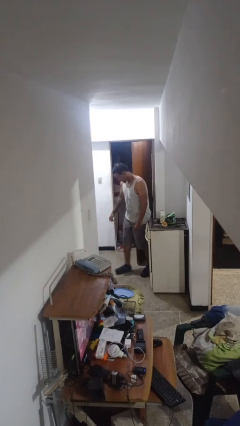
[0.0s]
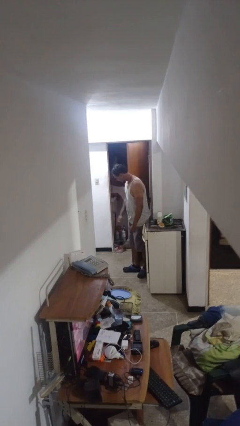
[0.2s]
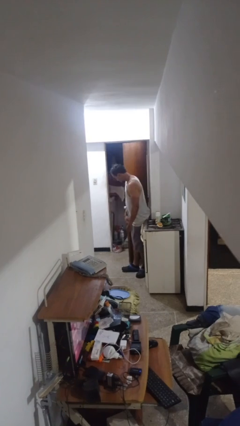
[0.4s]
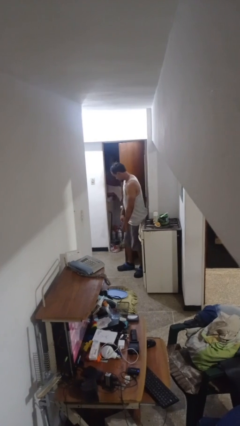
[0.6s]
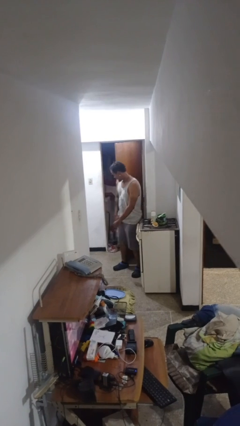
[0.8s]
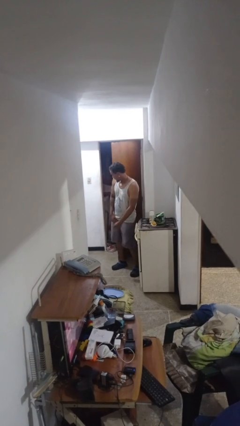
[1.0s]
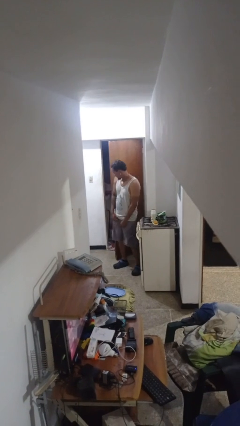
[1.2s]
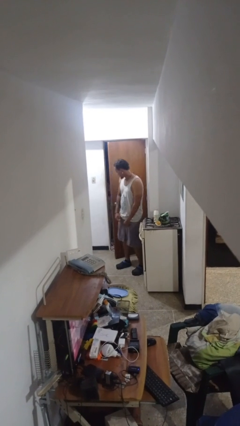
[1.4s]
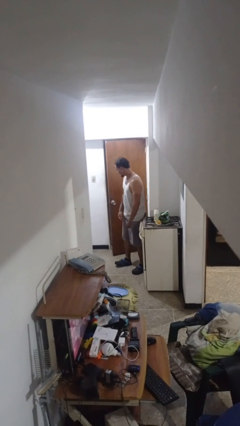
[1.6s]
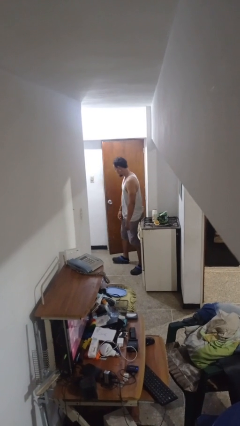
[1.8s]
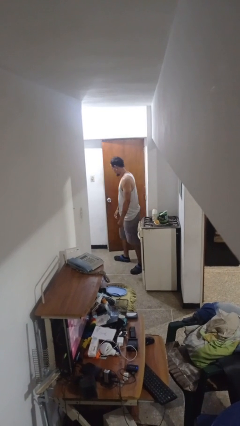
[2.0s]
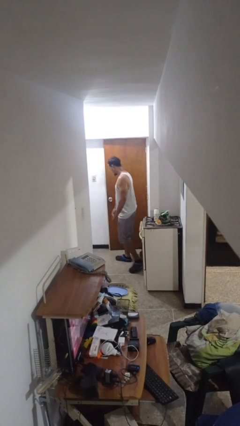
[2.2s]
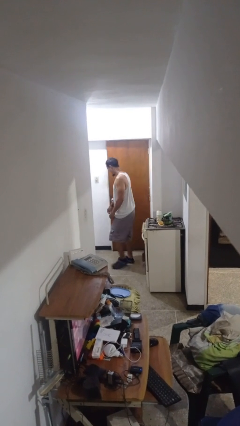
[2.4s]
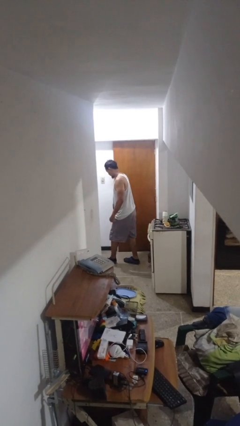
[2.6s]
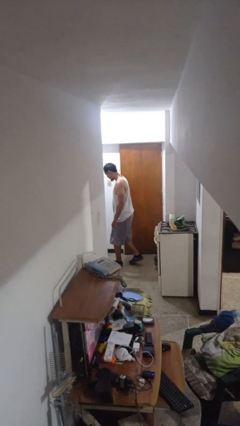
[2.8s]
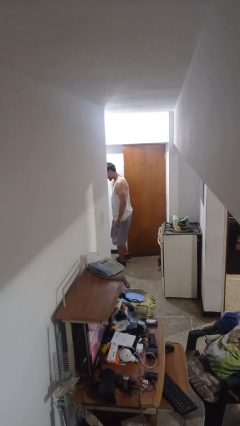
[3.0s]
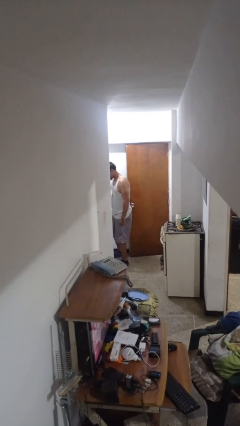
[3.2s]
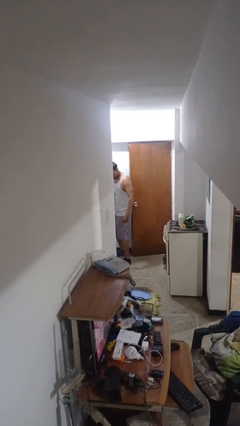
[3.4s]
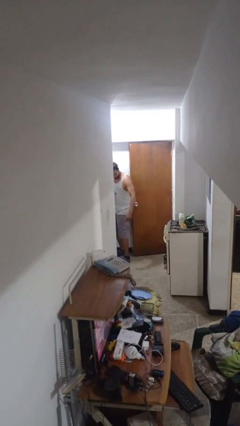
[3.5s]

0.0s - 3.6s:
person closes door with hip

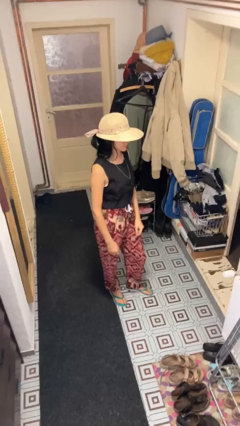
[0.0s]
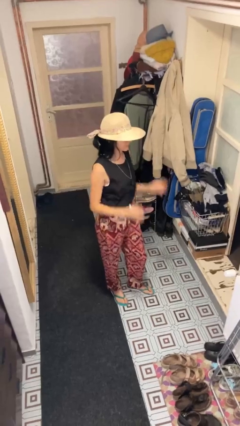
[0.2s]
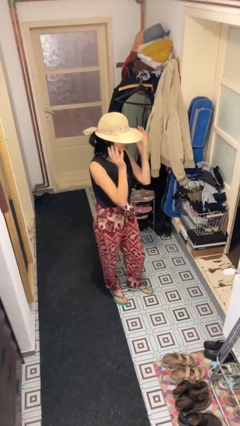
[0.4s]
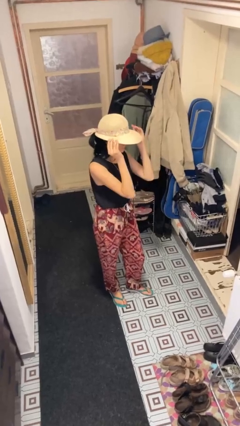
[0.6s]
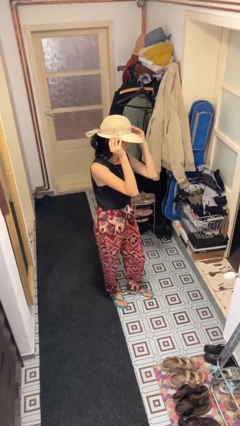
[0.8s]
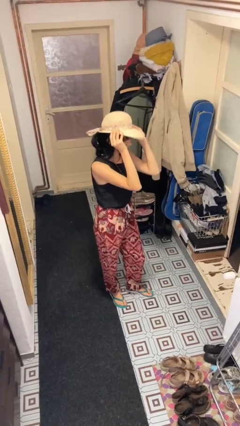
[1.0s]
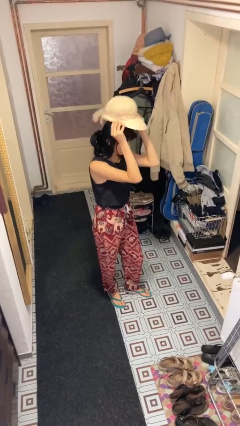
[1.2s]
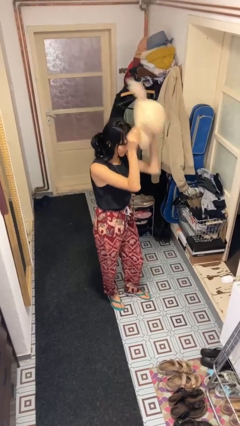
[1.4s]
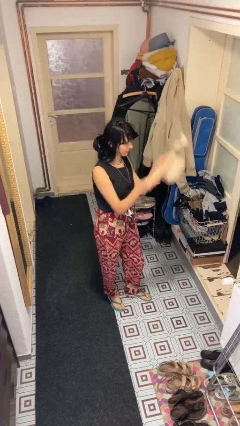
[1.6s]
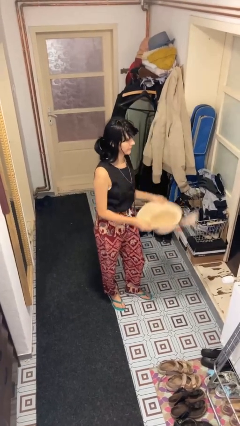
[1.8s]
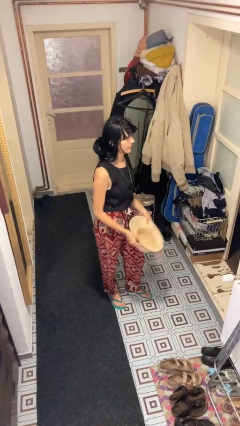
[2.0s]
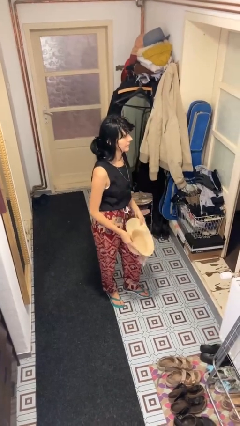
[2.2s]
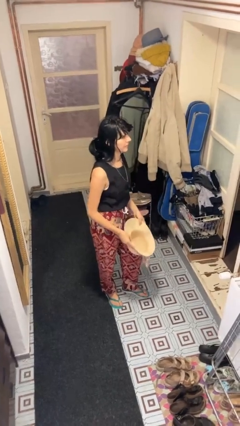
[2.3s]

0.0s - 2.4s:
person takes off hat

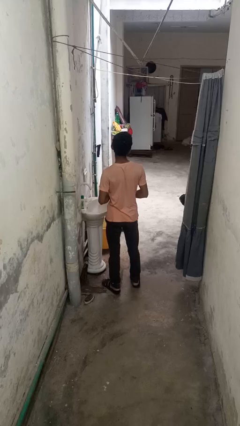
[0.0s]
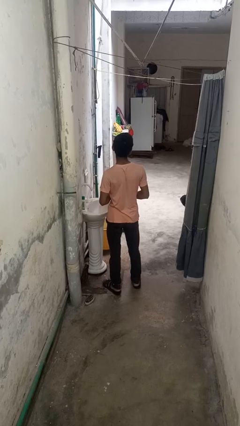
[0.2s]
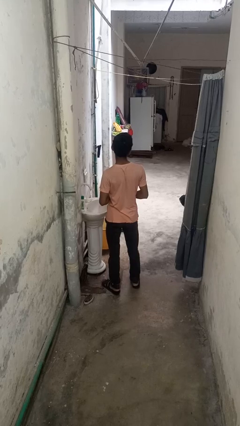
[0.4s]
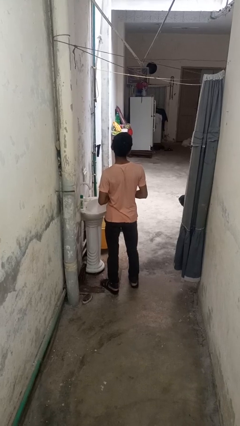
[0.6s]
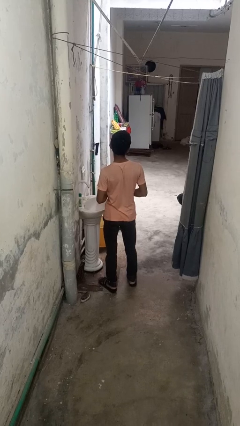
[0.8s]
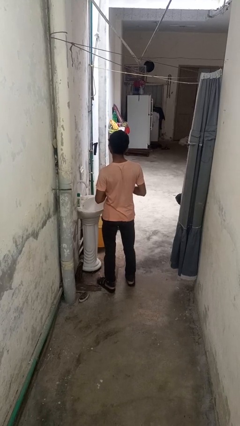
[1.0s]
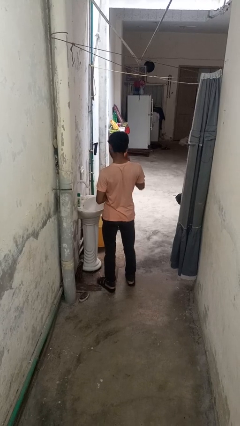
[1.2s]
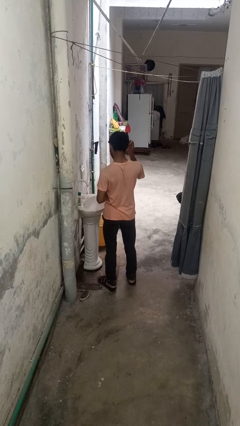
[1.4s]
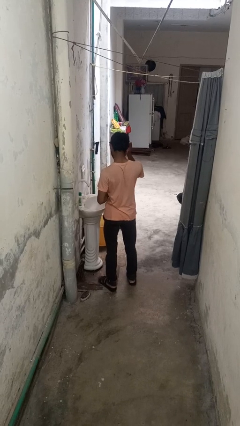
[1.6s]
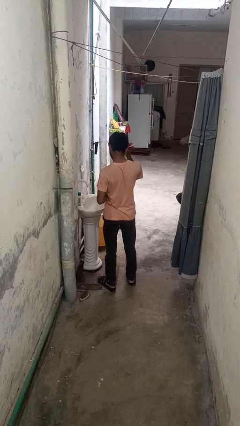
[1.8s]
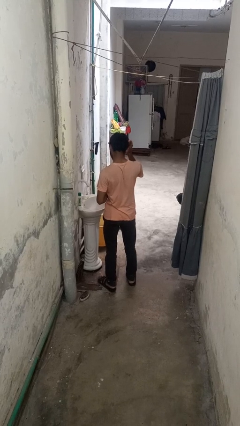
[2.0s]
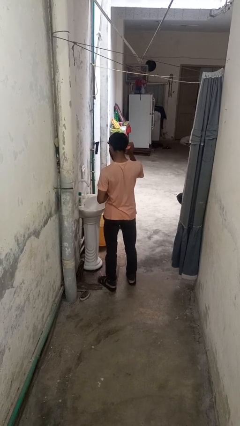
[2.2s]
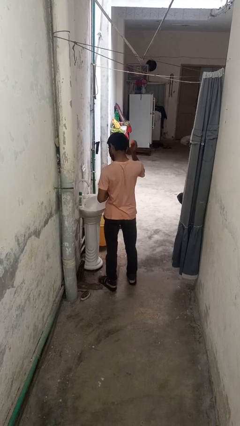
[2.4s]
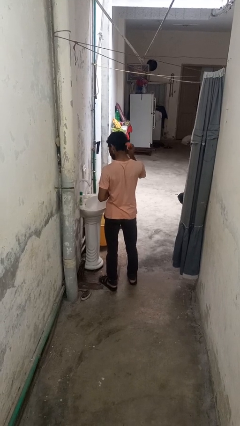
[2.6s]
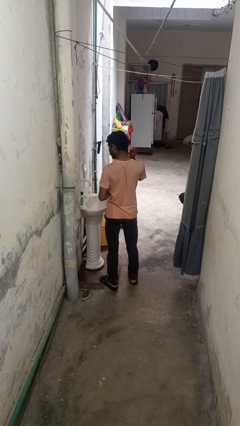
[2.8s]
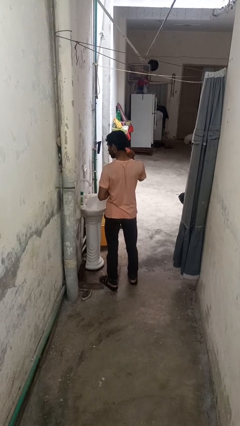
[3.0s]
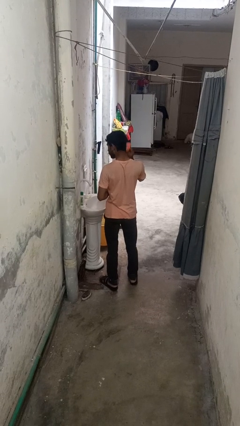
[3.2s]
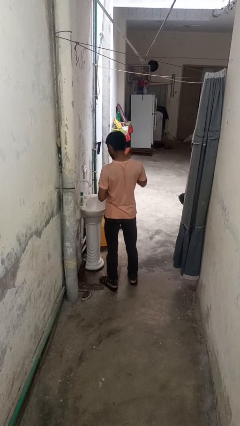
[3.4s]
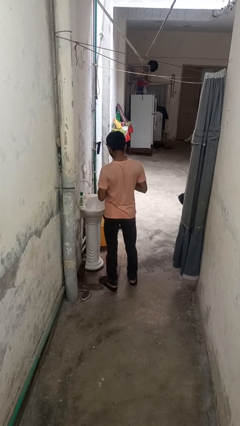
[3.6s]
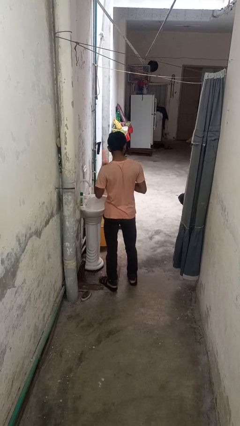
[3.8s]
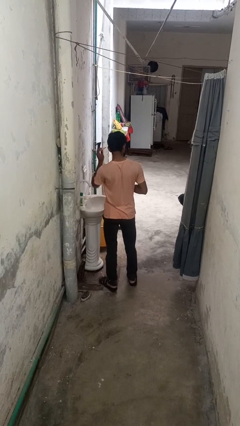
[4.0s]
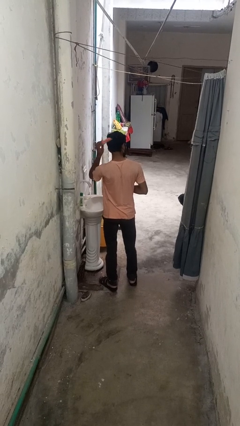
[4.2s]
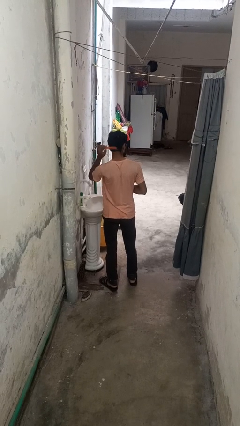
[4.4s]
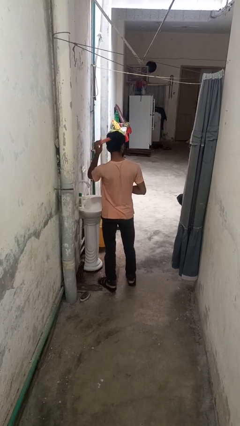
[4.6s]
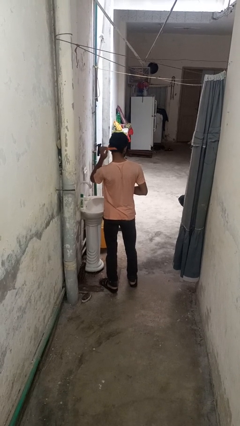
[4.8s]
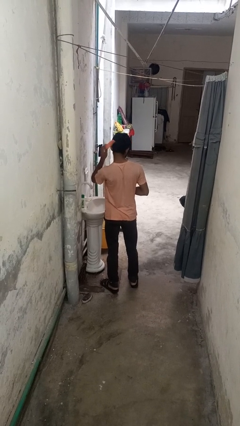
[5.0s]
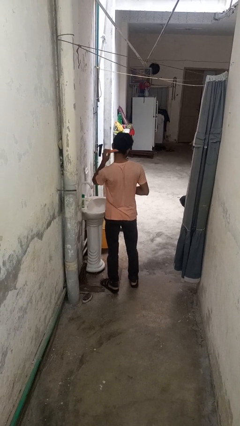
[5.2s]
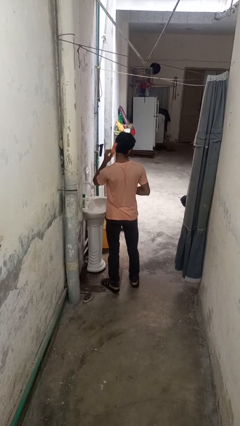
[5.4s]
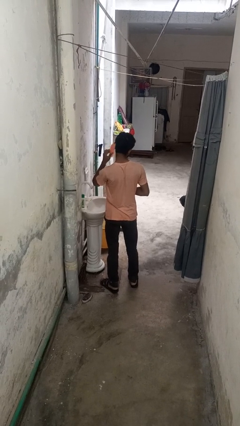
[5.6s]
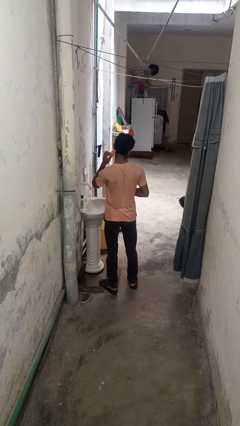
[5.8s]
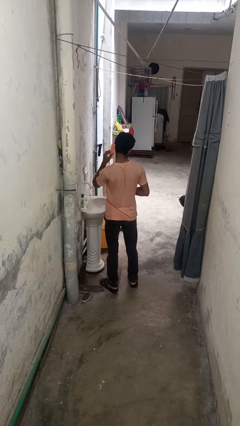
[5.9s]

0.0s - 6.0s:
person brushes hair

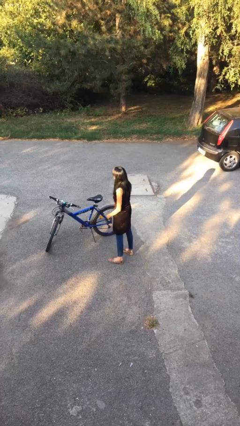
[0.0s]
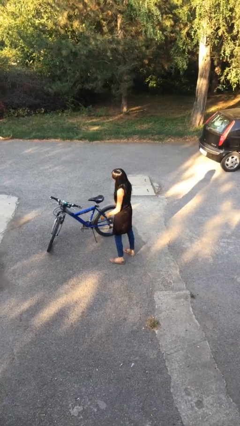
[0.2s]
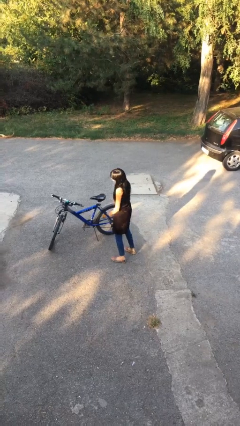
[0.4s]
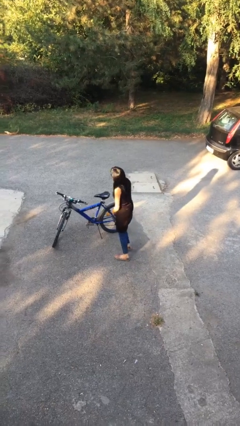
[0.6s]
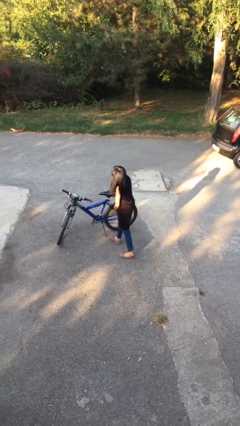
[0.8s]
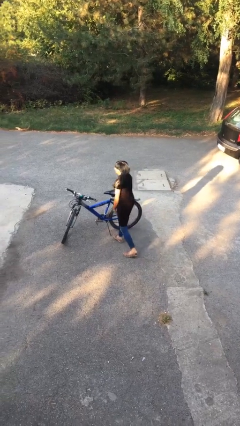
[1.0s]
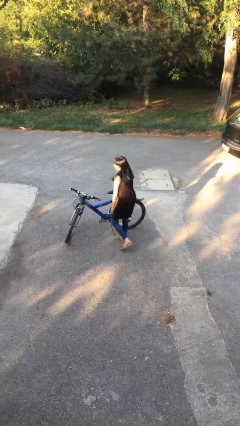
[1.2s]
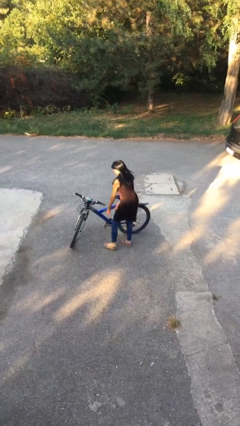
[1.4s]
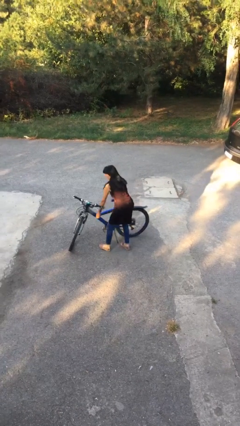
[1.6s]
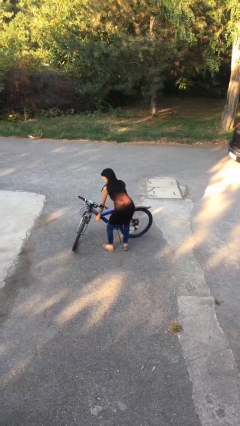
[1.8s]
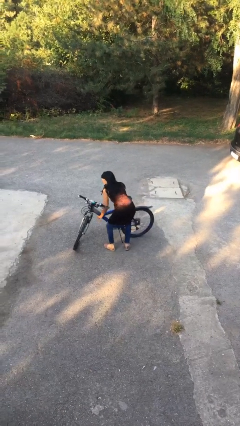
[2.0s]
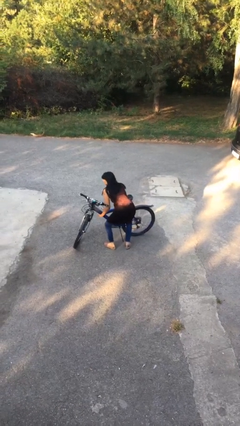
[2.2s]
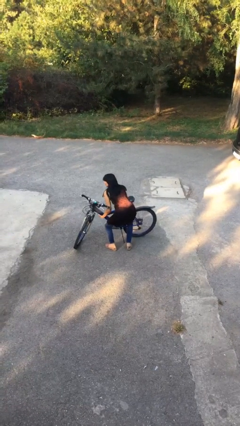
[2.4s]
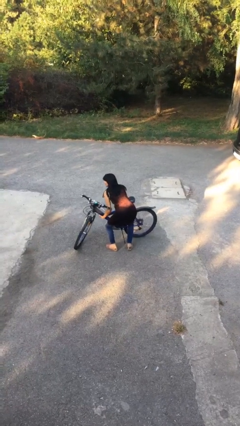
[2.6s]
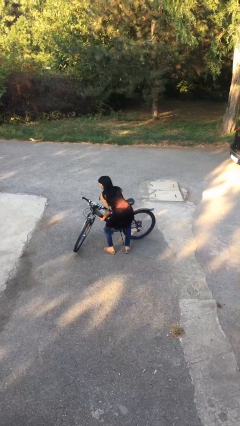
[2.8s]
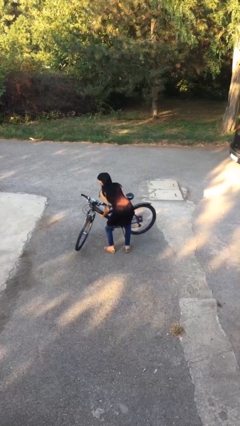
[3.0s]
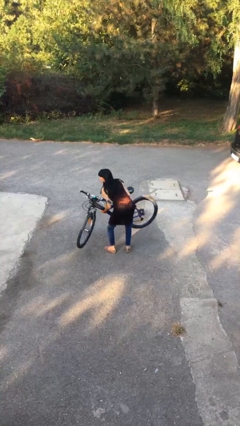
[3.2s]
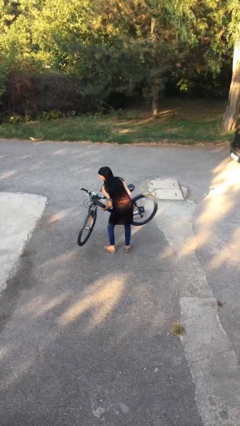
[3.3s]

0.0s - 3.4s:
person picks up object from floor

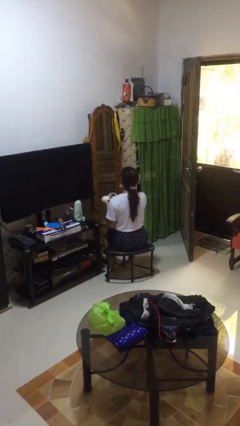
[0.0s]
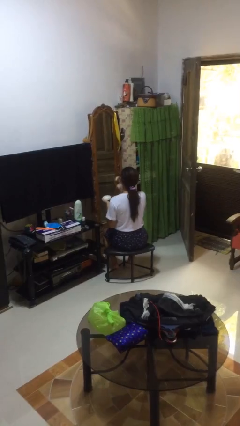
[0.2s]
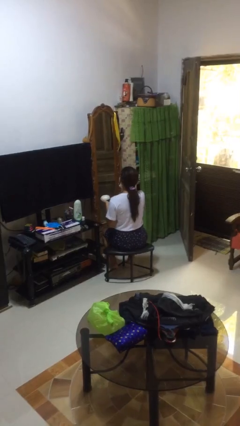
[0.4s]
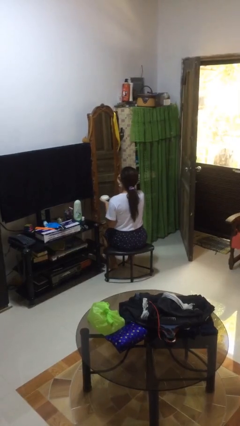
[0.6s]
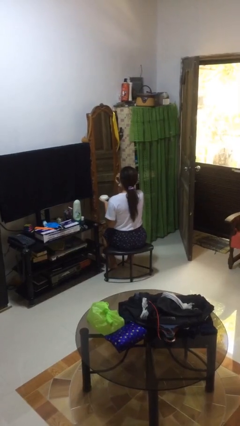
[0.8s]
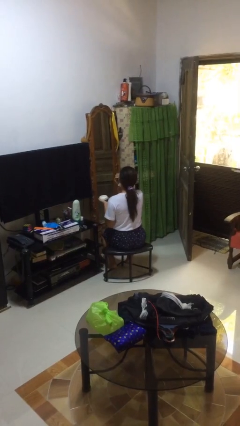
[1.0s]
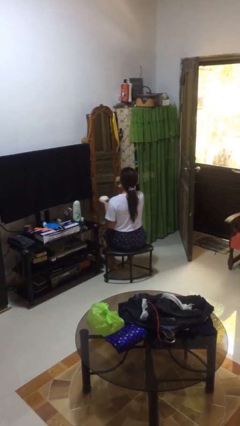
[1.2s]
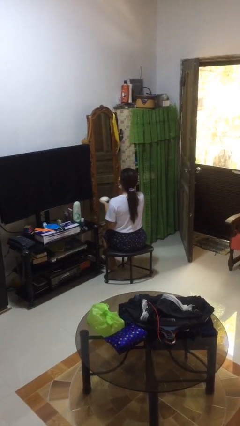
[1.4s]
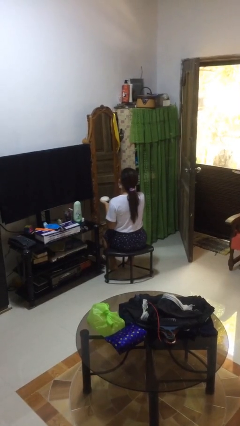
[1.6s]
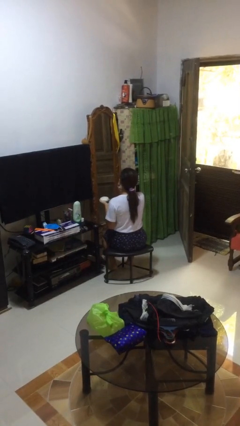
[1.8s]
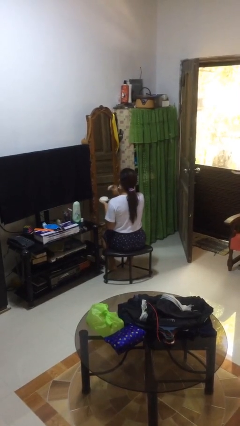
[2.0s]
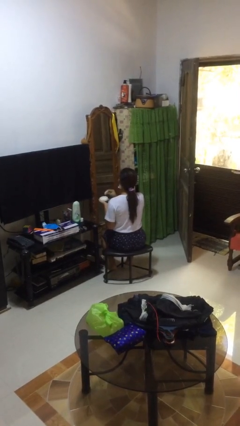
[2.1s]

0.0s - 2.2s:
person applies foundation makeup
